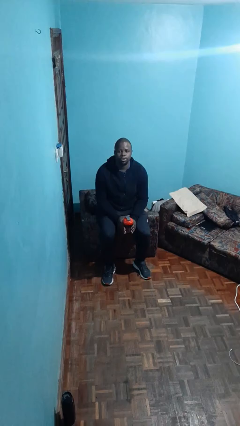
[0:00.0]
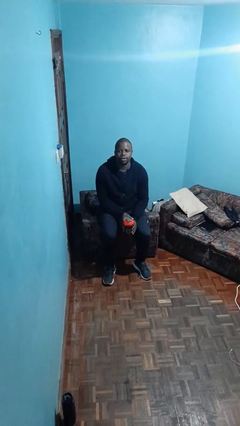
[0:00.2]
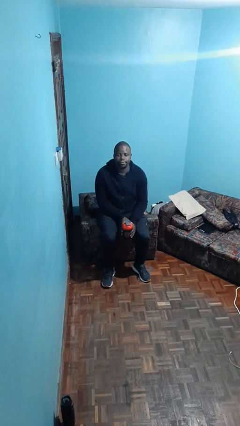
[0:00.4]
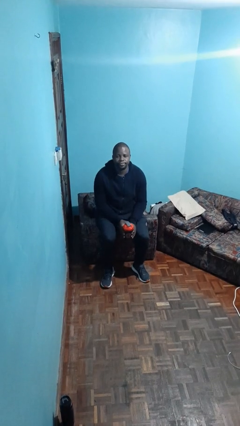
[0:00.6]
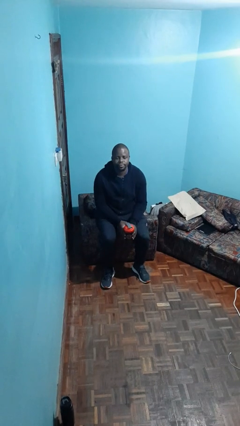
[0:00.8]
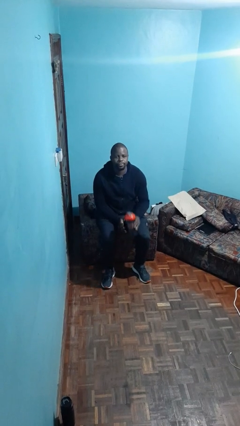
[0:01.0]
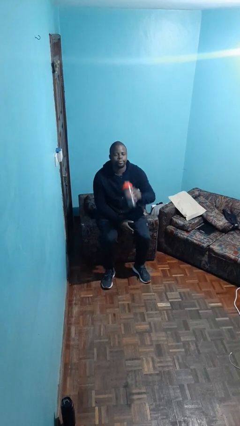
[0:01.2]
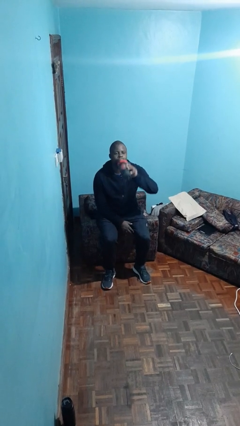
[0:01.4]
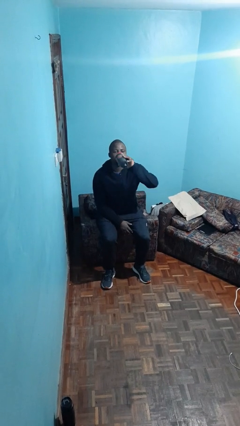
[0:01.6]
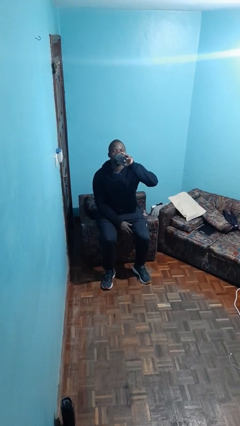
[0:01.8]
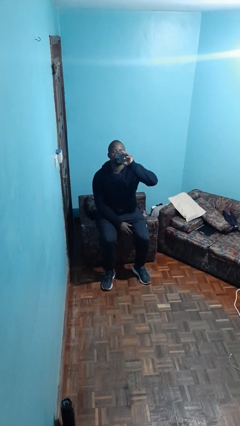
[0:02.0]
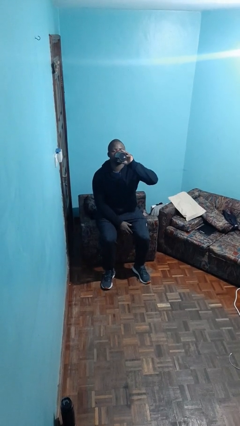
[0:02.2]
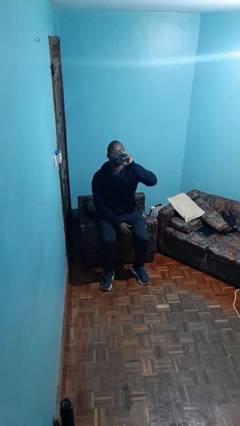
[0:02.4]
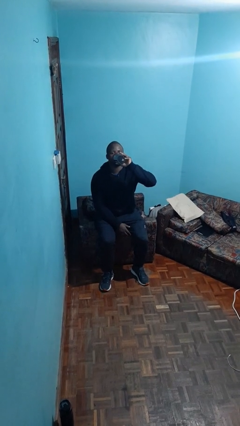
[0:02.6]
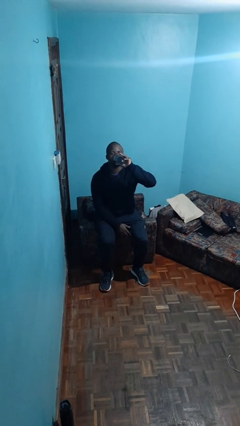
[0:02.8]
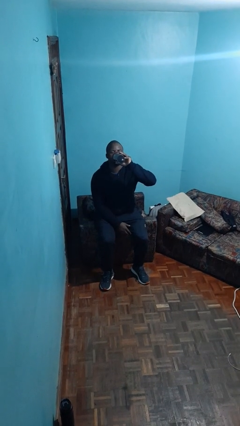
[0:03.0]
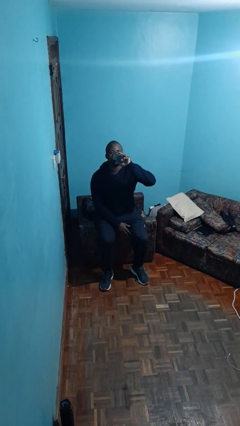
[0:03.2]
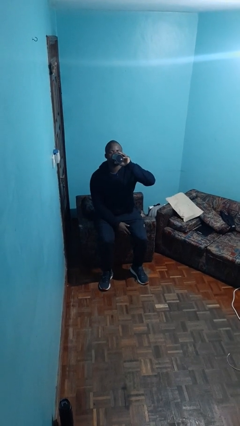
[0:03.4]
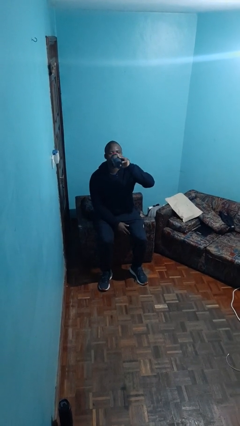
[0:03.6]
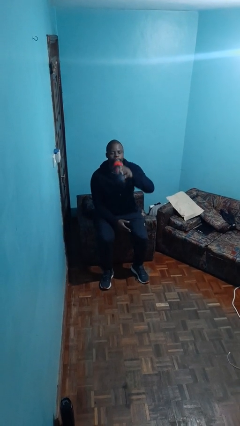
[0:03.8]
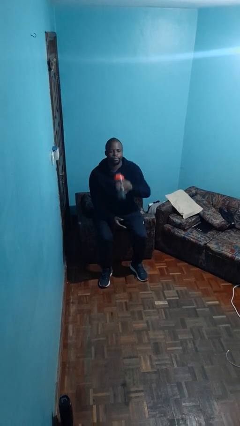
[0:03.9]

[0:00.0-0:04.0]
person drinks from bottle

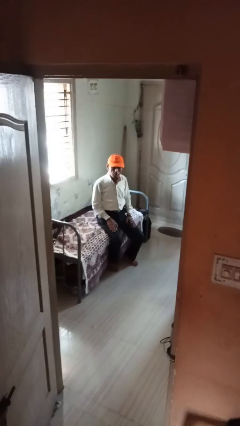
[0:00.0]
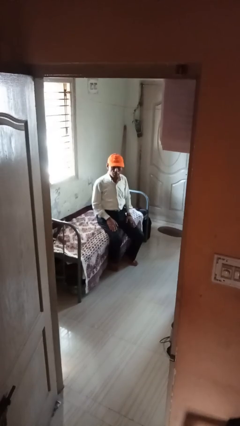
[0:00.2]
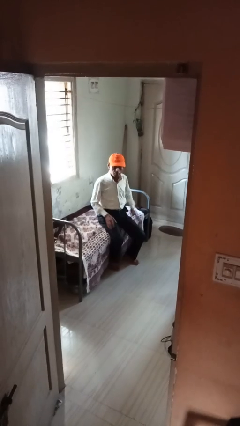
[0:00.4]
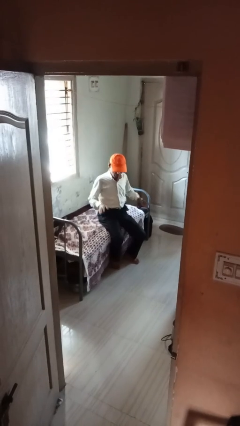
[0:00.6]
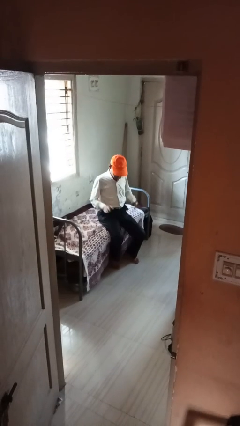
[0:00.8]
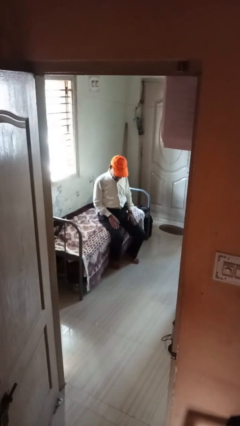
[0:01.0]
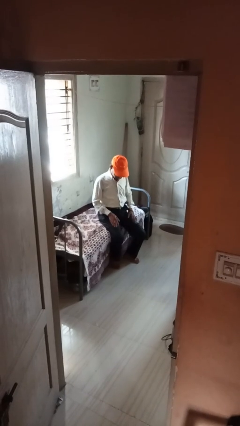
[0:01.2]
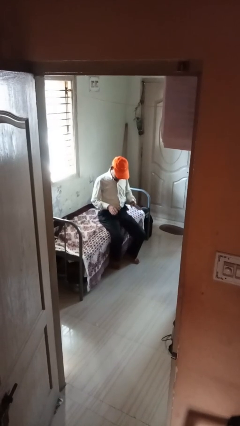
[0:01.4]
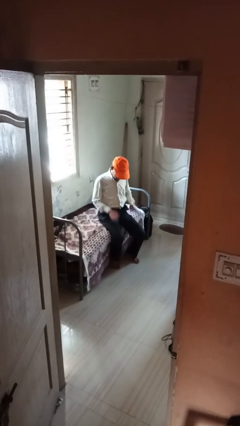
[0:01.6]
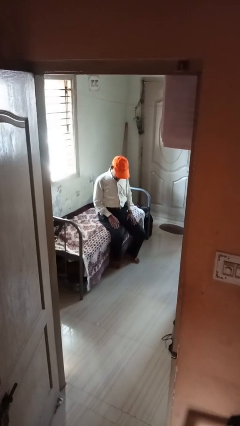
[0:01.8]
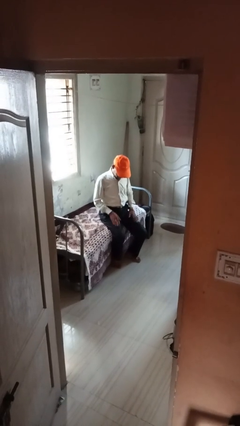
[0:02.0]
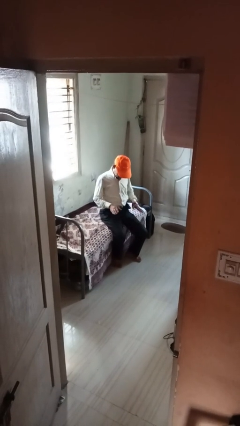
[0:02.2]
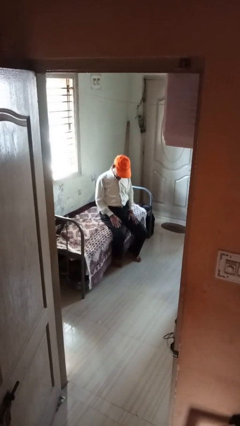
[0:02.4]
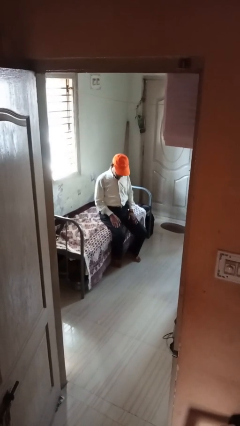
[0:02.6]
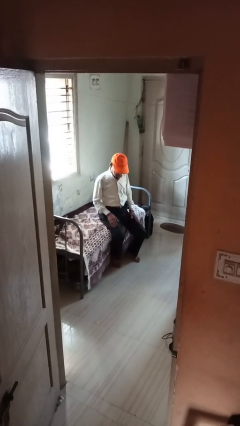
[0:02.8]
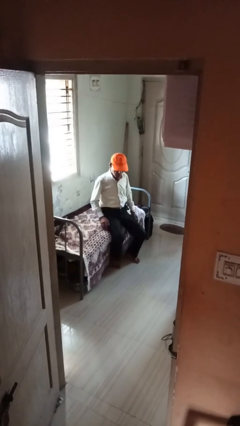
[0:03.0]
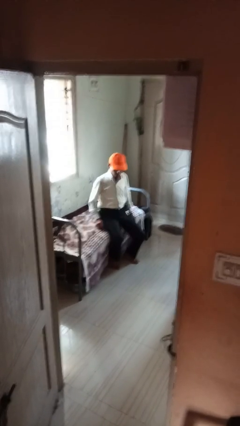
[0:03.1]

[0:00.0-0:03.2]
person slaps hands on thighs

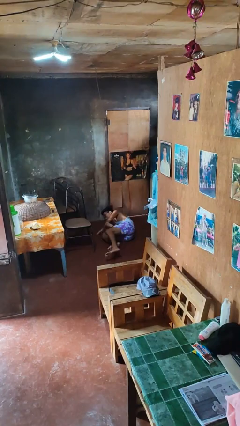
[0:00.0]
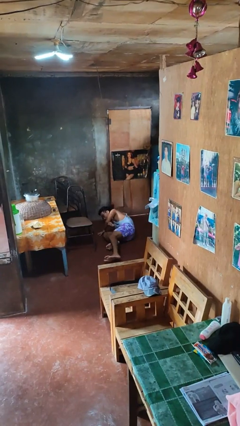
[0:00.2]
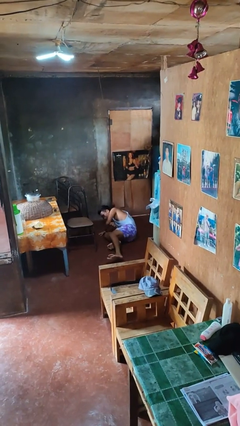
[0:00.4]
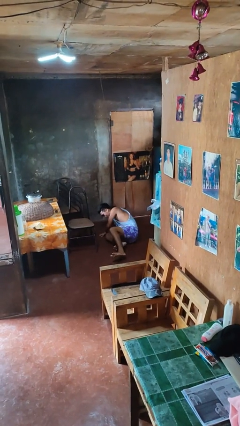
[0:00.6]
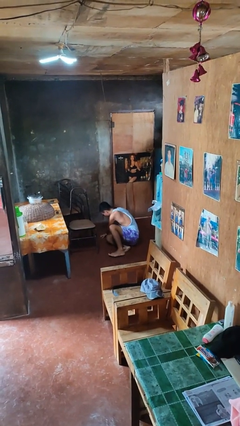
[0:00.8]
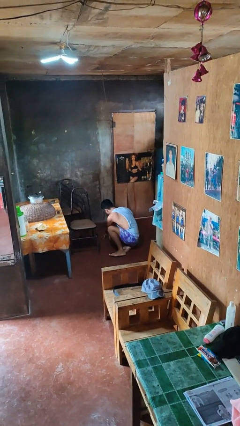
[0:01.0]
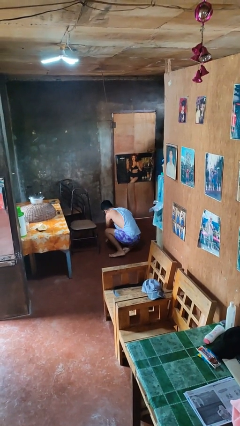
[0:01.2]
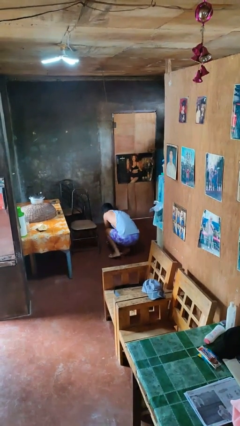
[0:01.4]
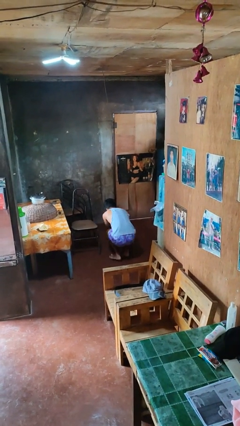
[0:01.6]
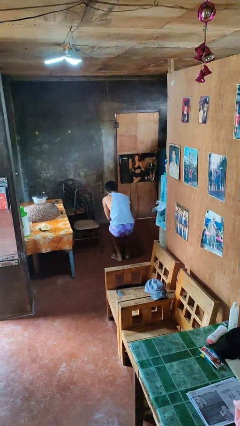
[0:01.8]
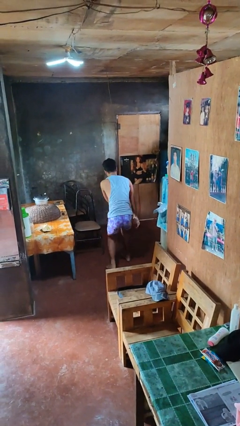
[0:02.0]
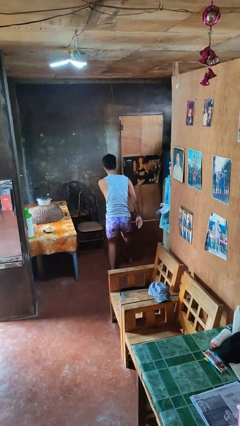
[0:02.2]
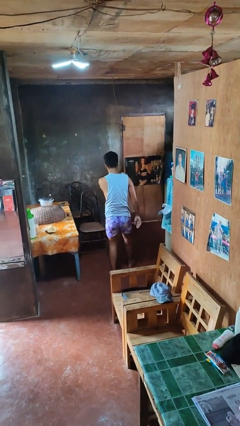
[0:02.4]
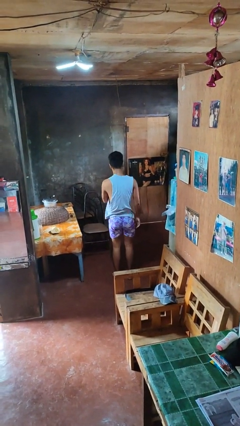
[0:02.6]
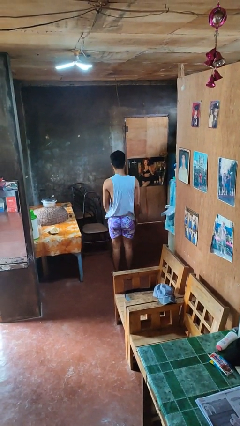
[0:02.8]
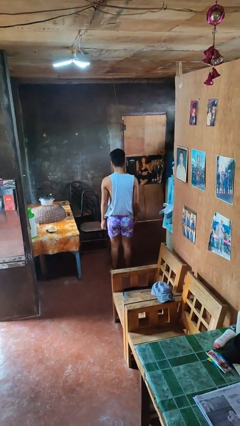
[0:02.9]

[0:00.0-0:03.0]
person stands up from floor

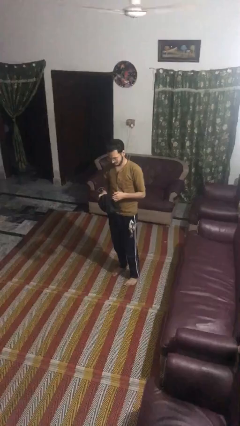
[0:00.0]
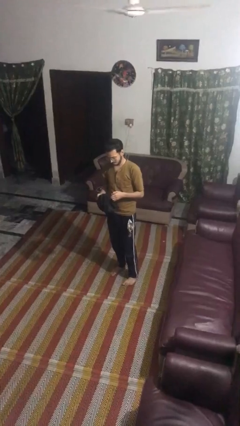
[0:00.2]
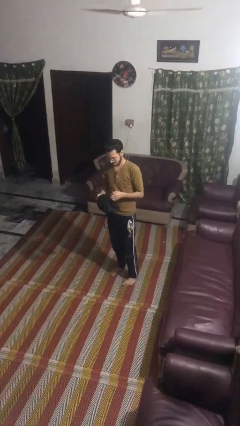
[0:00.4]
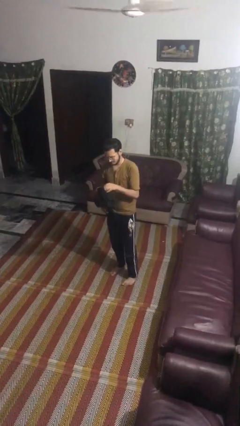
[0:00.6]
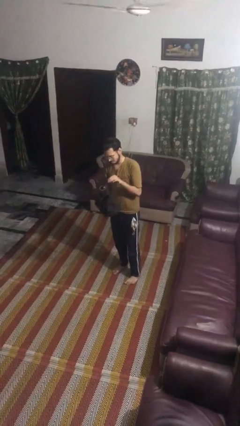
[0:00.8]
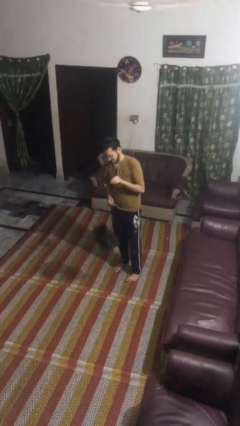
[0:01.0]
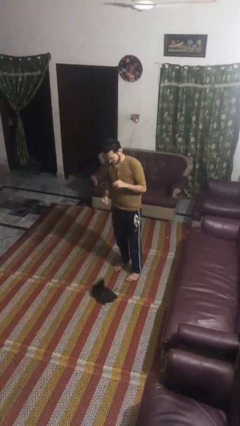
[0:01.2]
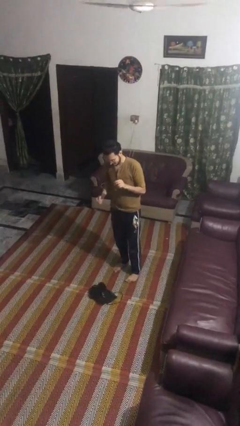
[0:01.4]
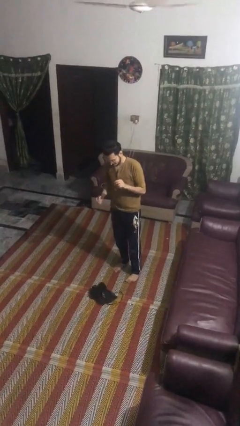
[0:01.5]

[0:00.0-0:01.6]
person drops object

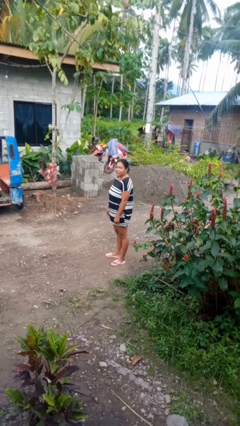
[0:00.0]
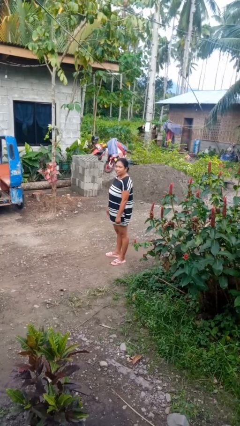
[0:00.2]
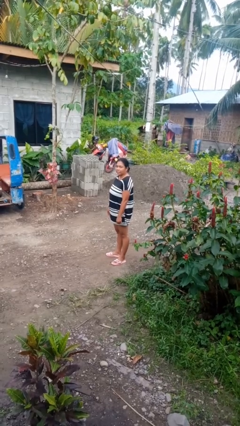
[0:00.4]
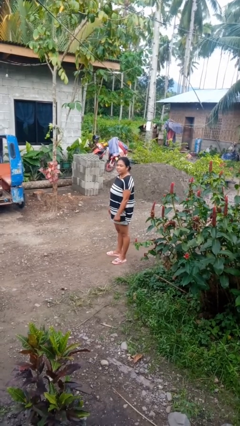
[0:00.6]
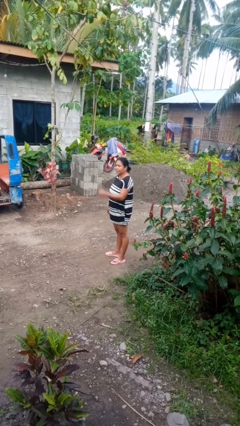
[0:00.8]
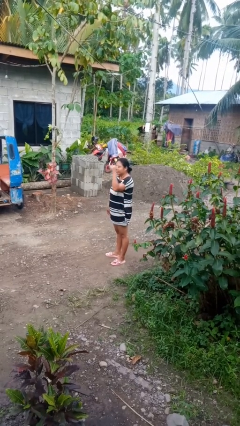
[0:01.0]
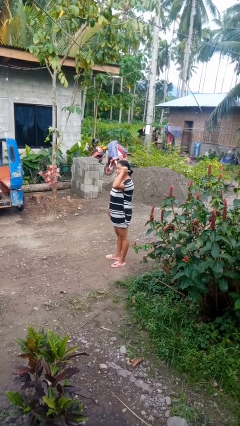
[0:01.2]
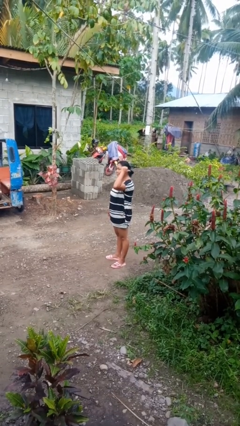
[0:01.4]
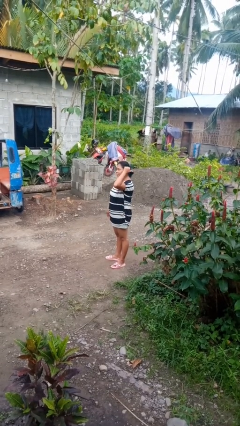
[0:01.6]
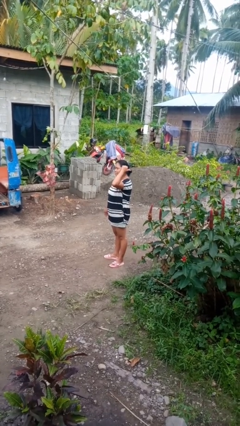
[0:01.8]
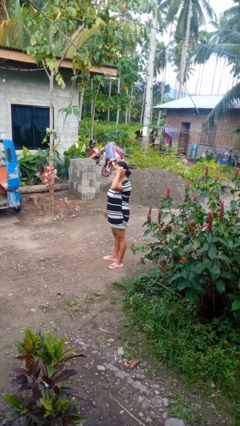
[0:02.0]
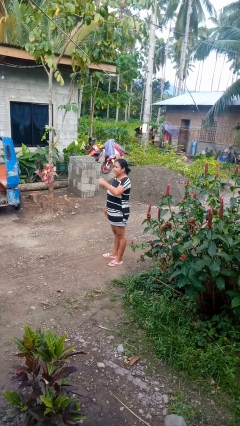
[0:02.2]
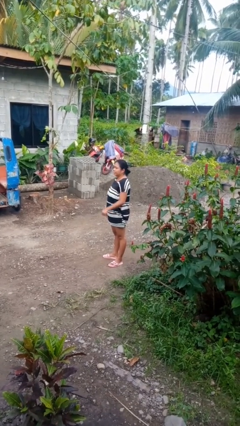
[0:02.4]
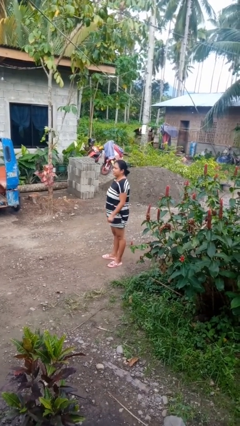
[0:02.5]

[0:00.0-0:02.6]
person gestures behind me

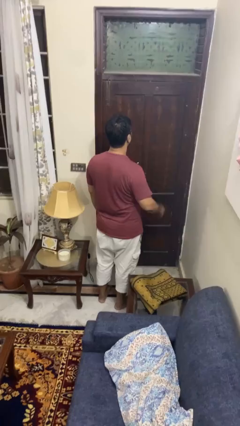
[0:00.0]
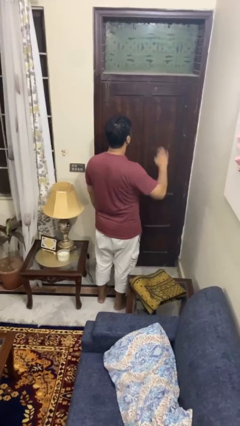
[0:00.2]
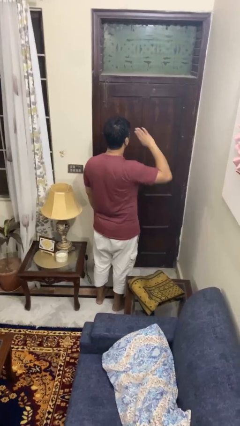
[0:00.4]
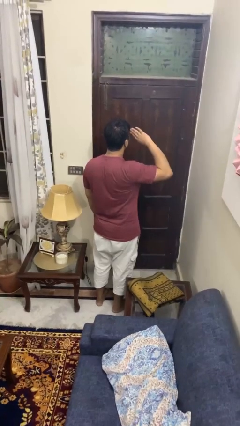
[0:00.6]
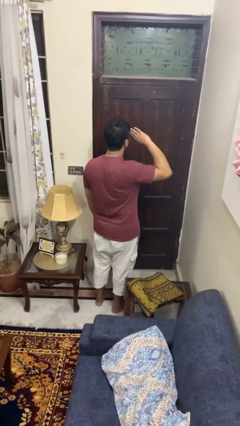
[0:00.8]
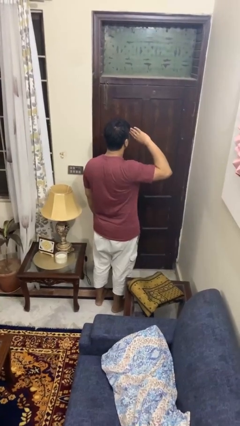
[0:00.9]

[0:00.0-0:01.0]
person salutes

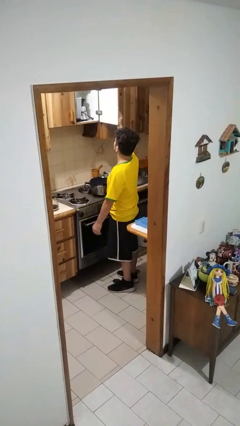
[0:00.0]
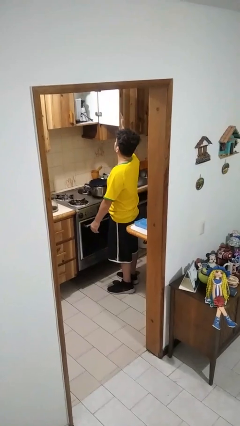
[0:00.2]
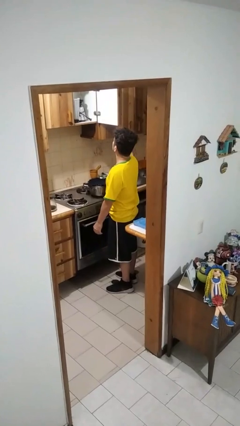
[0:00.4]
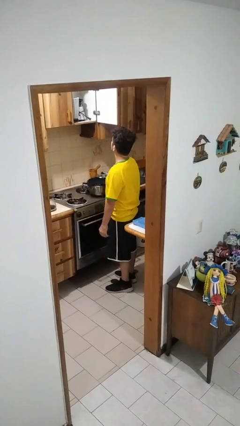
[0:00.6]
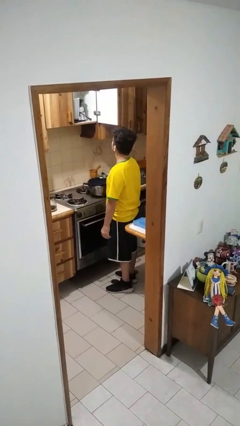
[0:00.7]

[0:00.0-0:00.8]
person opens cabinet

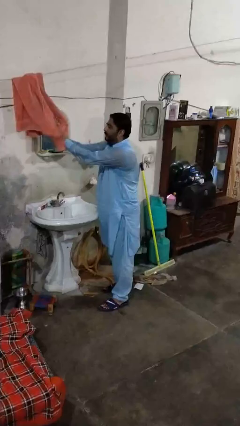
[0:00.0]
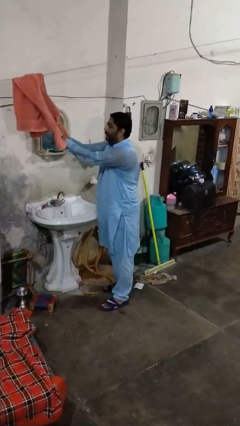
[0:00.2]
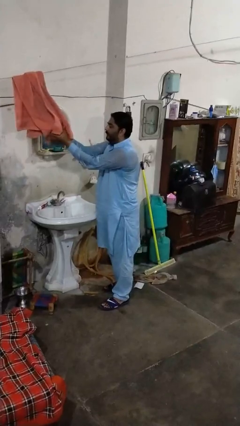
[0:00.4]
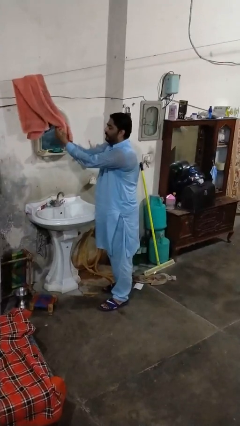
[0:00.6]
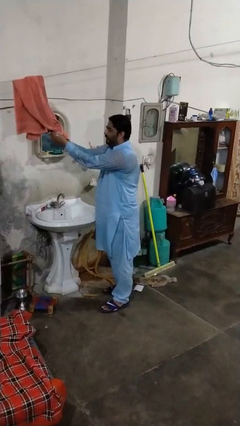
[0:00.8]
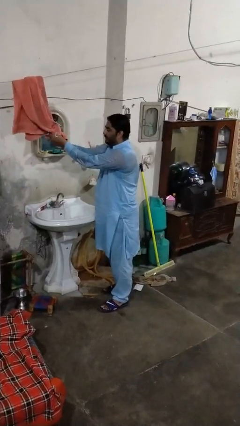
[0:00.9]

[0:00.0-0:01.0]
person dries hands with towel
